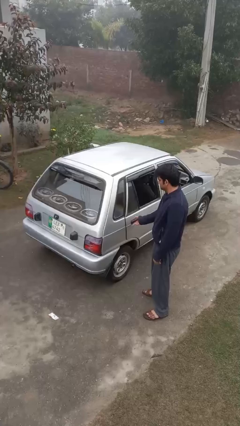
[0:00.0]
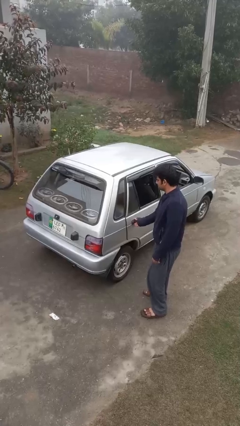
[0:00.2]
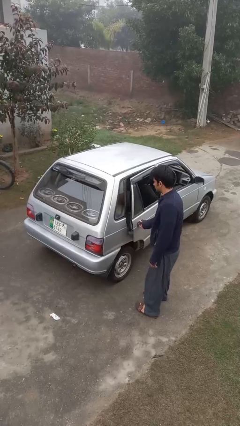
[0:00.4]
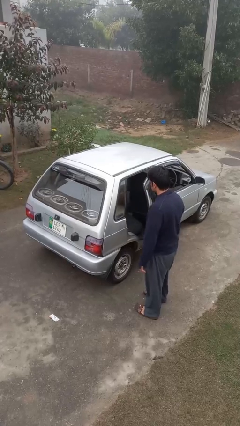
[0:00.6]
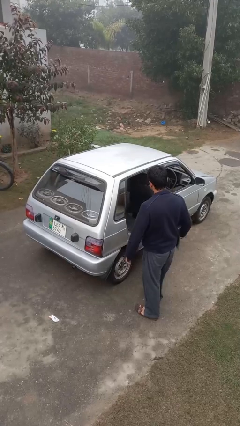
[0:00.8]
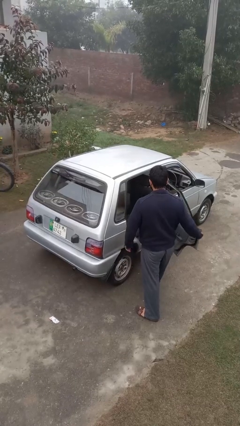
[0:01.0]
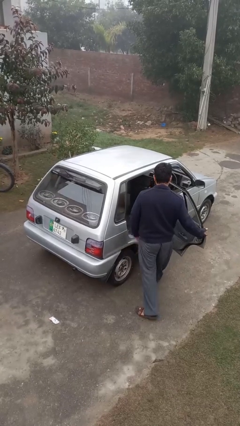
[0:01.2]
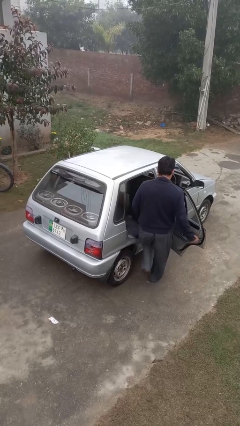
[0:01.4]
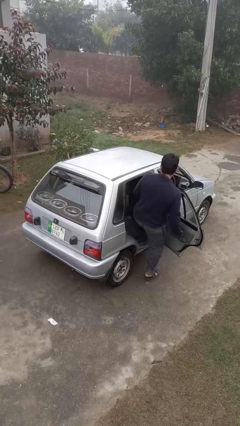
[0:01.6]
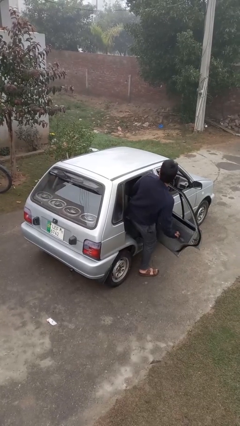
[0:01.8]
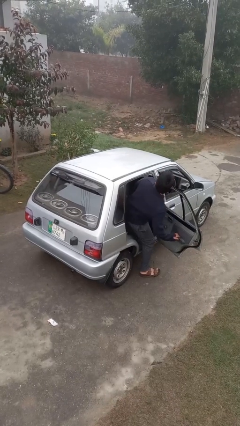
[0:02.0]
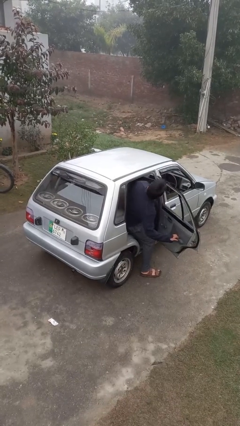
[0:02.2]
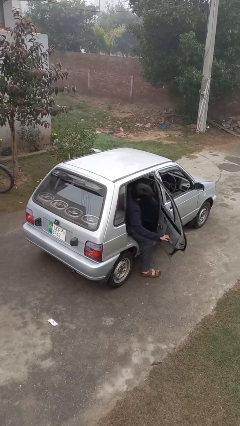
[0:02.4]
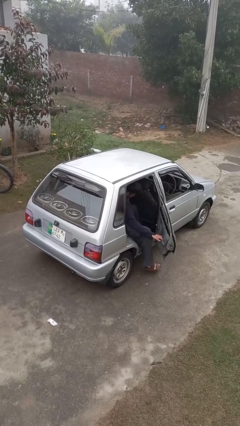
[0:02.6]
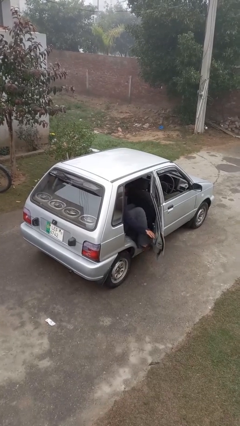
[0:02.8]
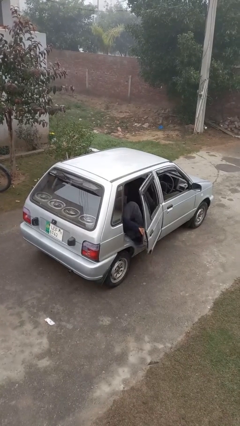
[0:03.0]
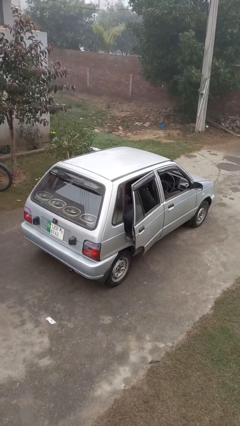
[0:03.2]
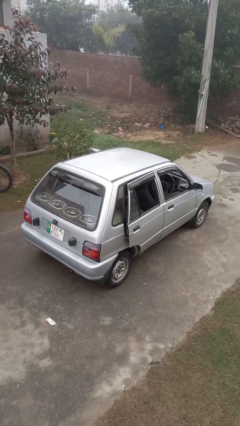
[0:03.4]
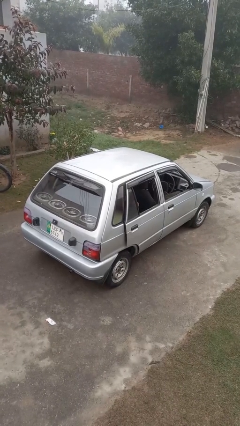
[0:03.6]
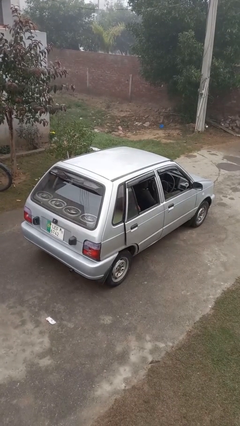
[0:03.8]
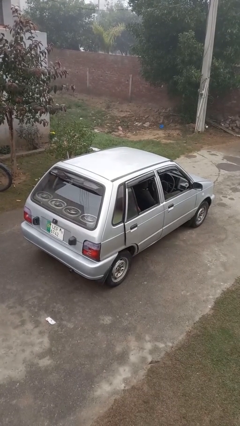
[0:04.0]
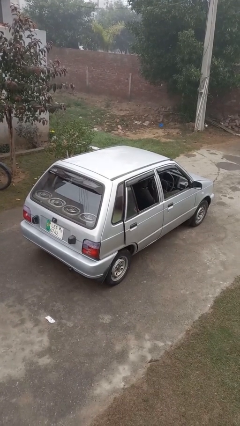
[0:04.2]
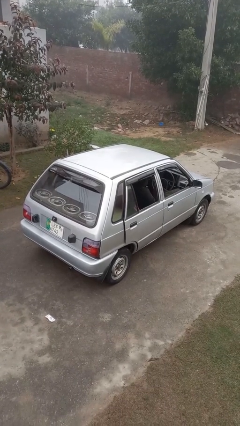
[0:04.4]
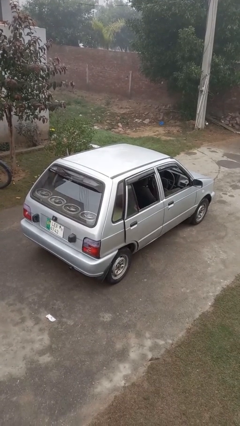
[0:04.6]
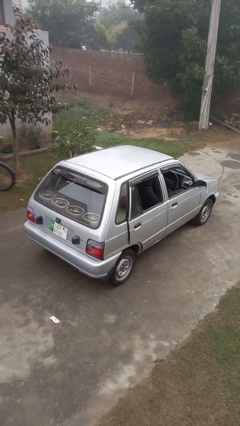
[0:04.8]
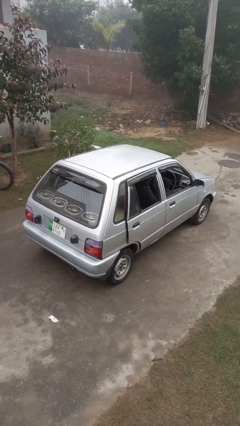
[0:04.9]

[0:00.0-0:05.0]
car picks up person

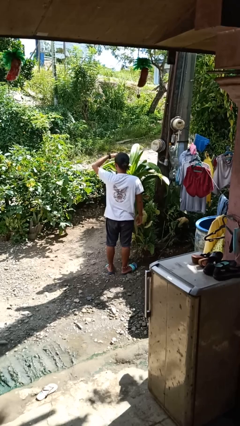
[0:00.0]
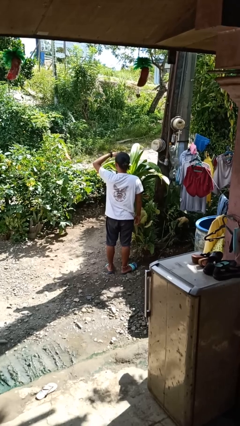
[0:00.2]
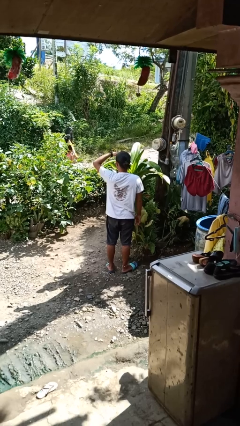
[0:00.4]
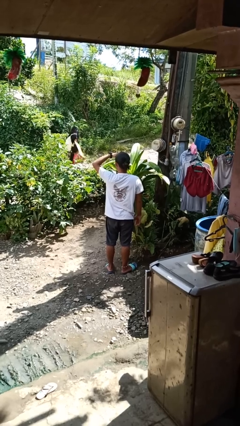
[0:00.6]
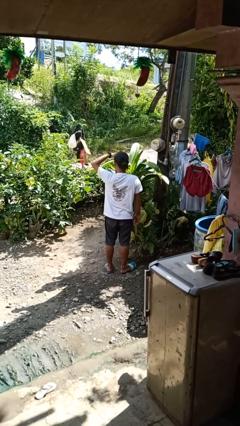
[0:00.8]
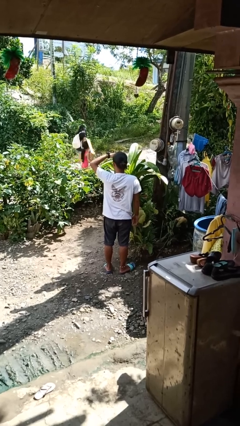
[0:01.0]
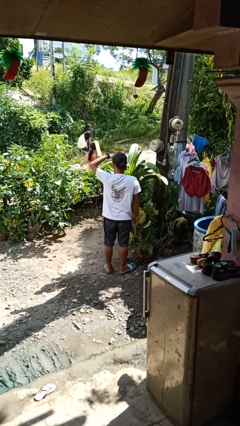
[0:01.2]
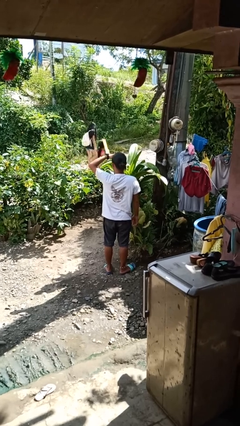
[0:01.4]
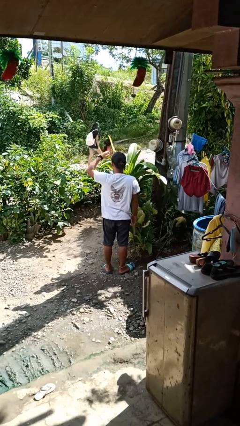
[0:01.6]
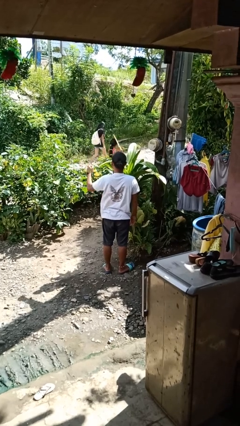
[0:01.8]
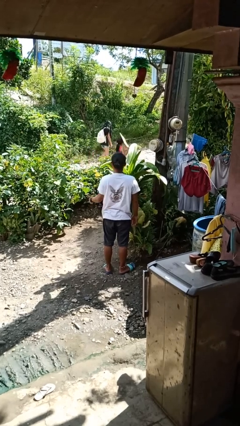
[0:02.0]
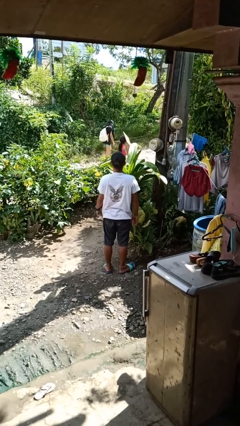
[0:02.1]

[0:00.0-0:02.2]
person shades eyes

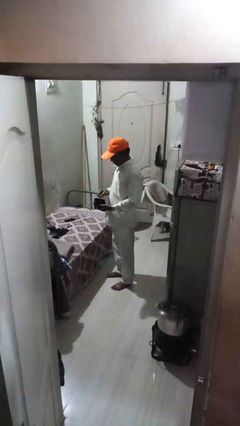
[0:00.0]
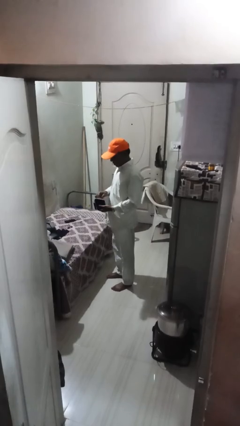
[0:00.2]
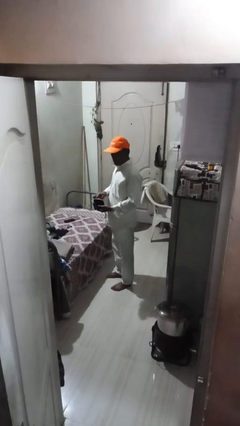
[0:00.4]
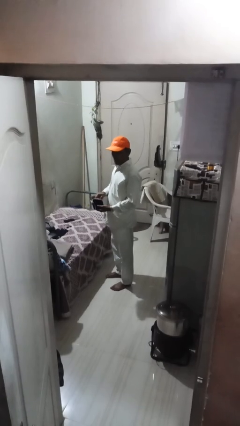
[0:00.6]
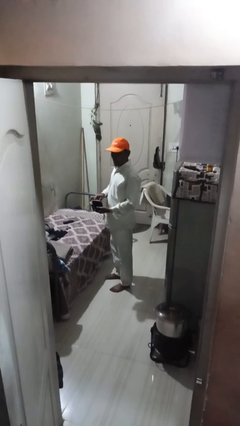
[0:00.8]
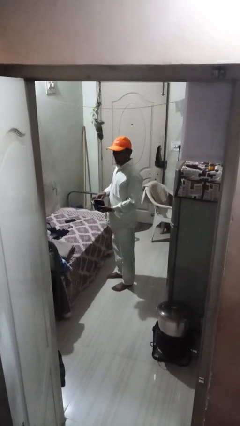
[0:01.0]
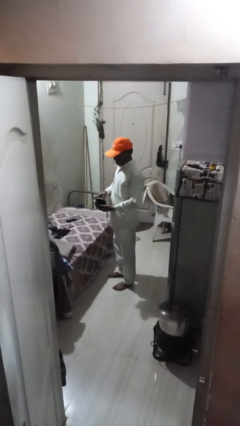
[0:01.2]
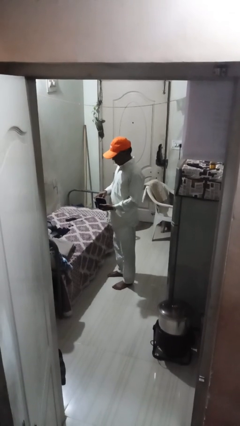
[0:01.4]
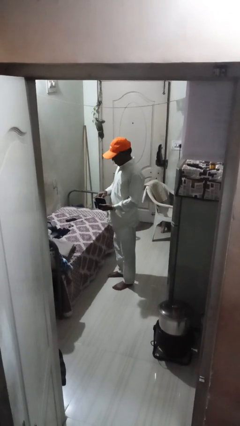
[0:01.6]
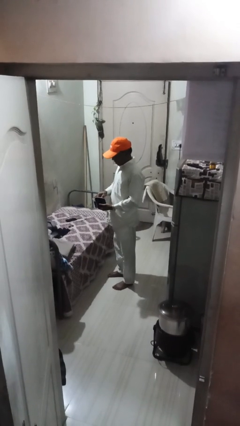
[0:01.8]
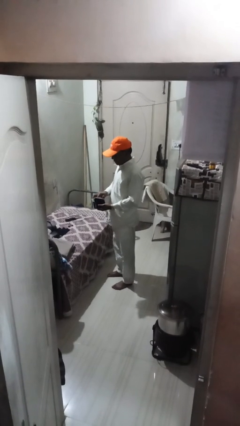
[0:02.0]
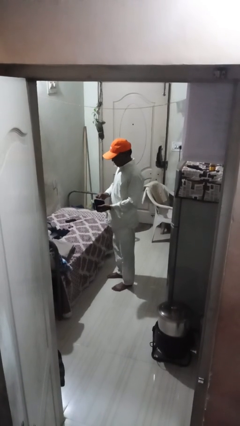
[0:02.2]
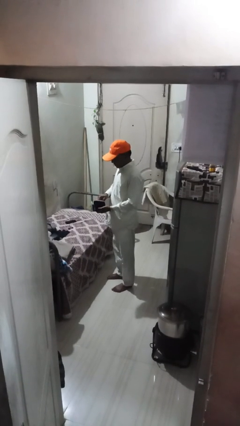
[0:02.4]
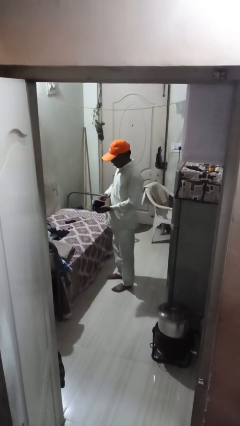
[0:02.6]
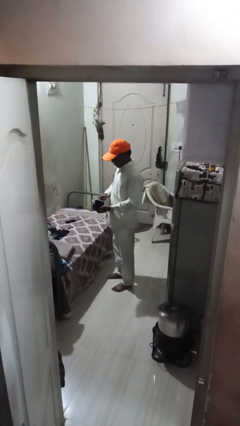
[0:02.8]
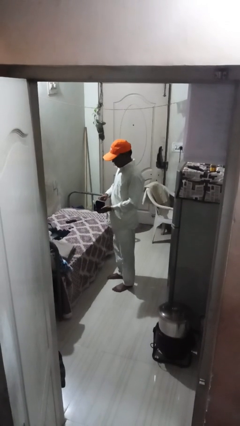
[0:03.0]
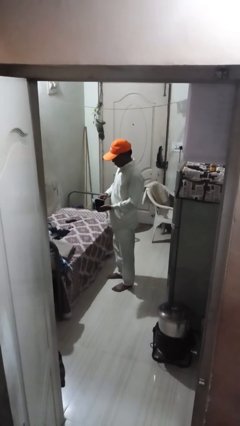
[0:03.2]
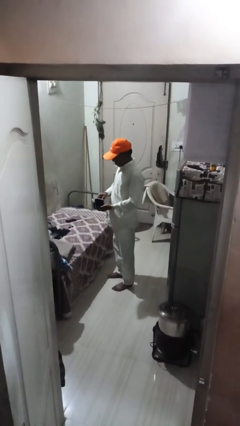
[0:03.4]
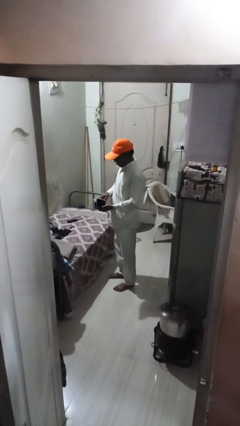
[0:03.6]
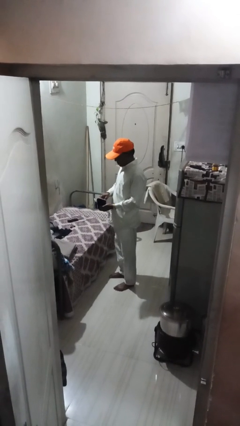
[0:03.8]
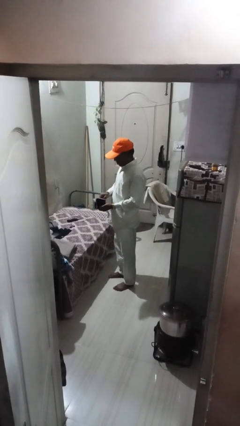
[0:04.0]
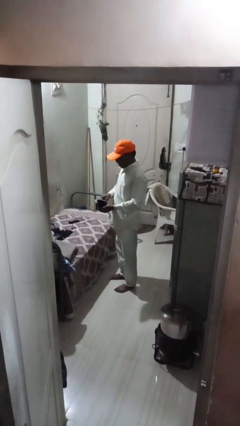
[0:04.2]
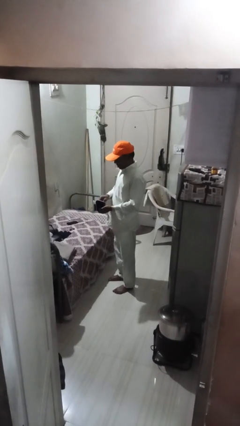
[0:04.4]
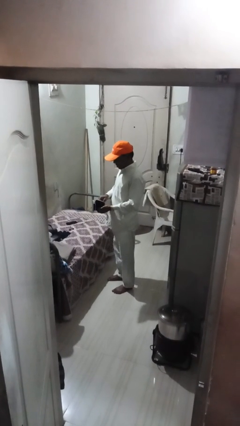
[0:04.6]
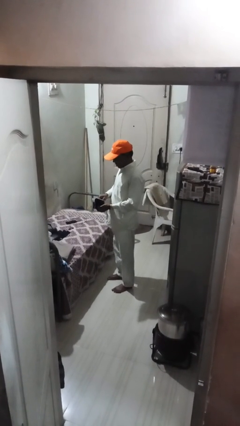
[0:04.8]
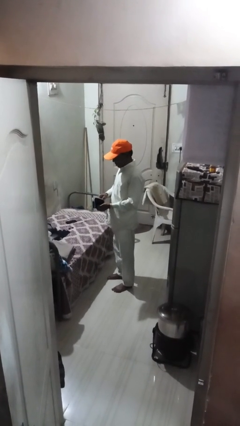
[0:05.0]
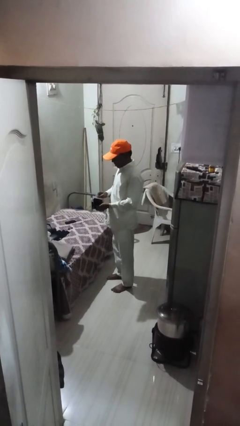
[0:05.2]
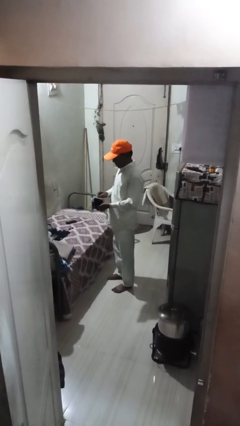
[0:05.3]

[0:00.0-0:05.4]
person searches in purse

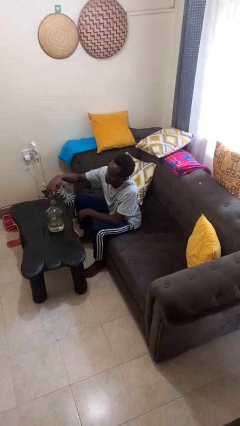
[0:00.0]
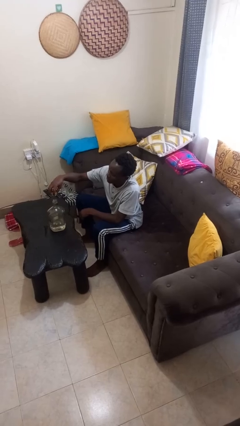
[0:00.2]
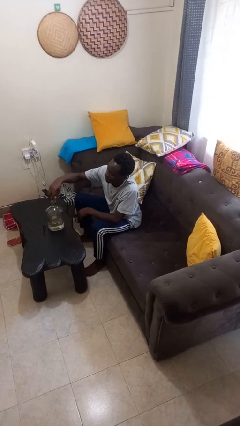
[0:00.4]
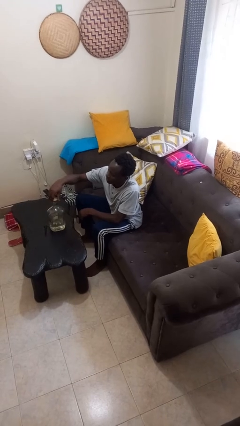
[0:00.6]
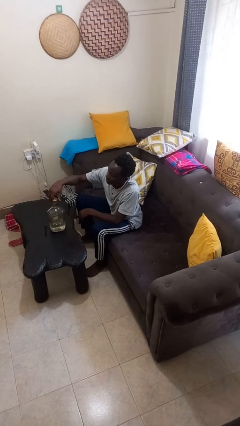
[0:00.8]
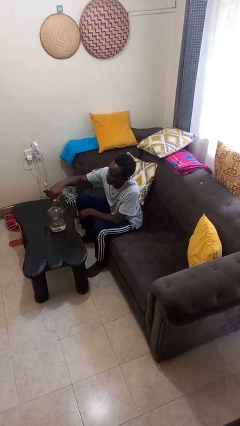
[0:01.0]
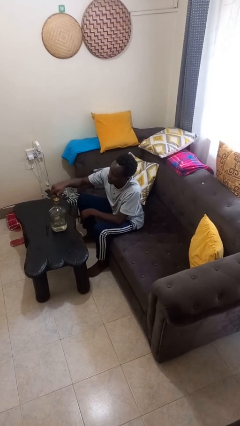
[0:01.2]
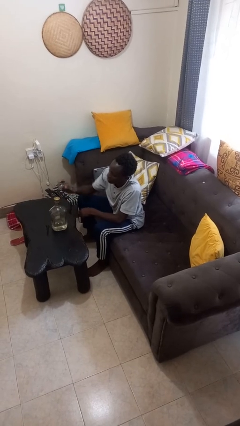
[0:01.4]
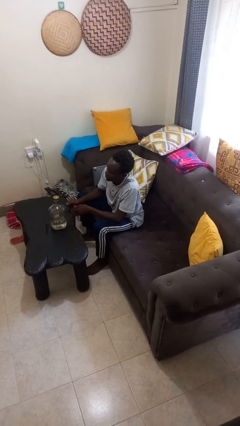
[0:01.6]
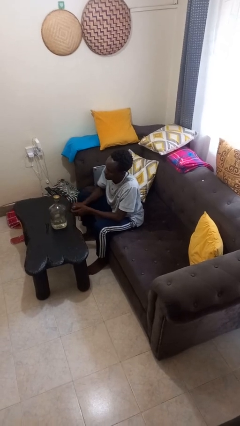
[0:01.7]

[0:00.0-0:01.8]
person screws lid to bottle

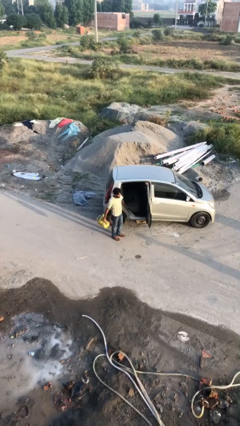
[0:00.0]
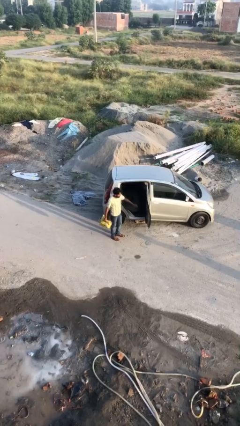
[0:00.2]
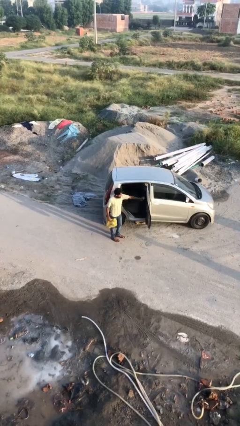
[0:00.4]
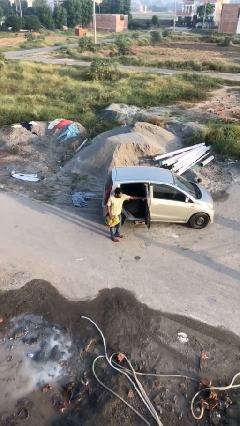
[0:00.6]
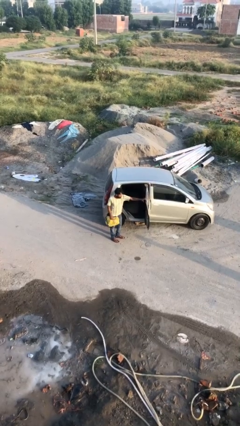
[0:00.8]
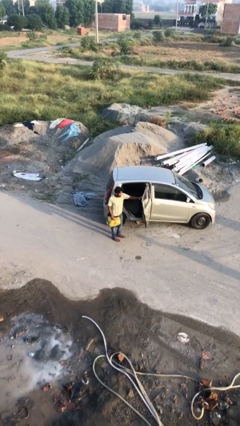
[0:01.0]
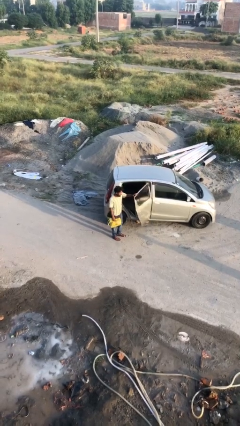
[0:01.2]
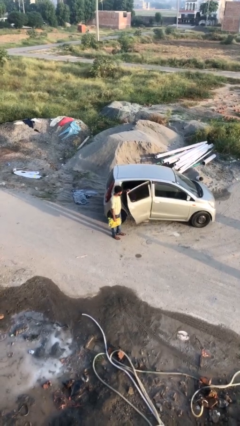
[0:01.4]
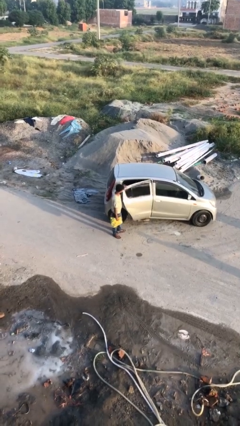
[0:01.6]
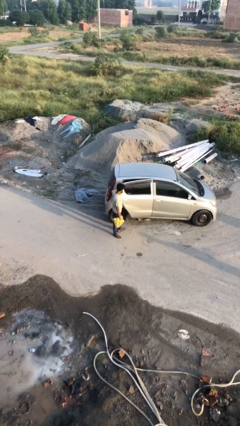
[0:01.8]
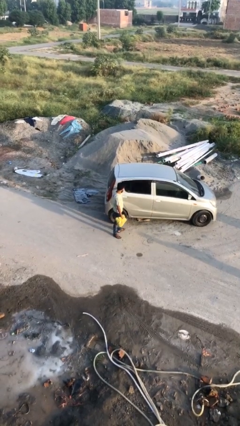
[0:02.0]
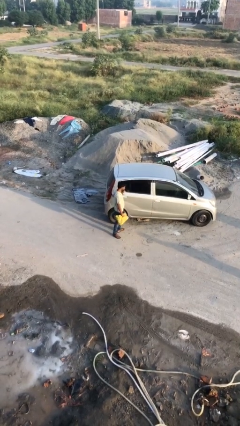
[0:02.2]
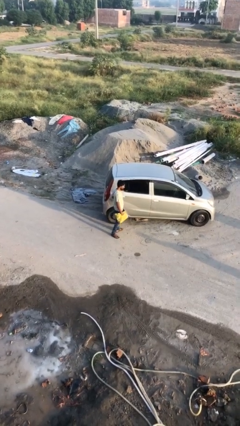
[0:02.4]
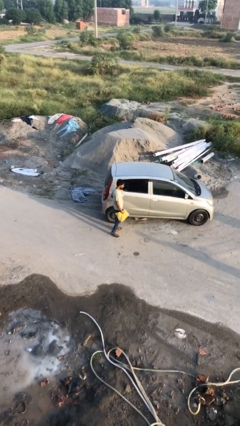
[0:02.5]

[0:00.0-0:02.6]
person closes car door

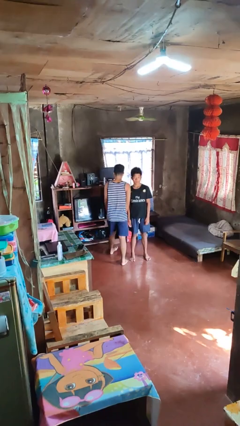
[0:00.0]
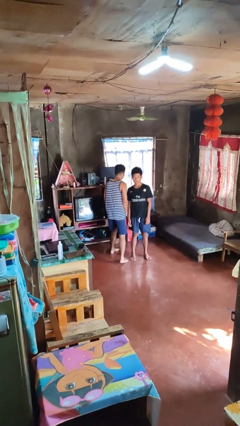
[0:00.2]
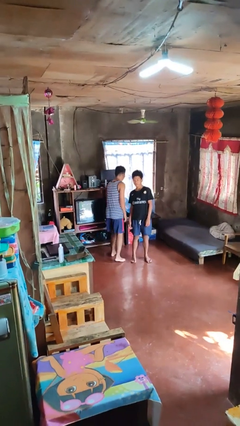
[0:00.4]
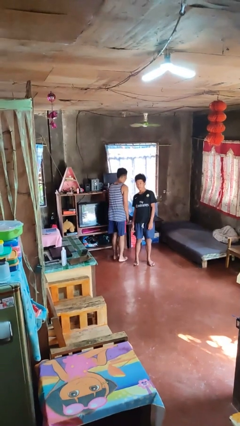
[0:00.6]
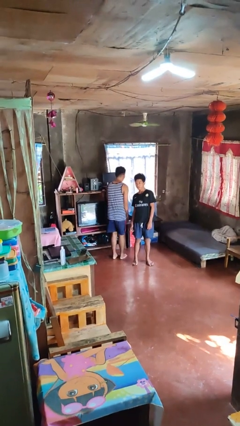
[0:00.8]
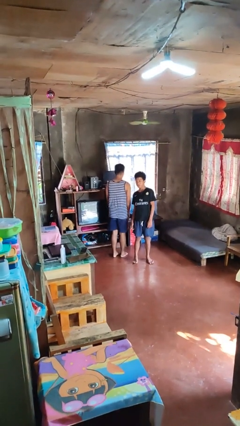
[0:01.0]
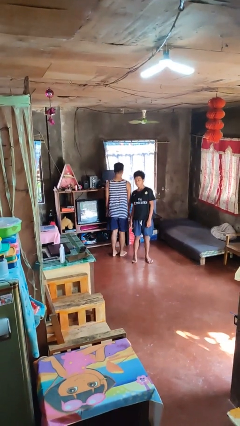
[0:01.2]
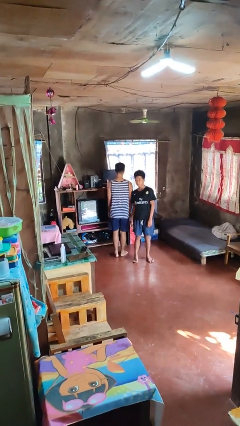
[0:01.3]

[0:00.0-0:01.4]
person bumps into person
